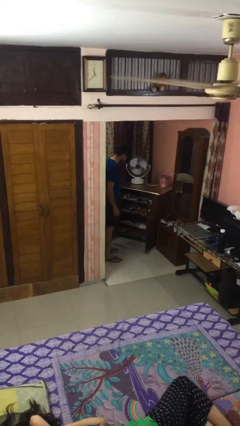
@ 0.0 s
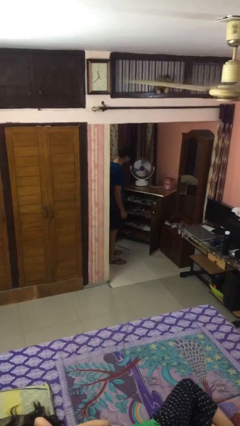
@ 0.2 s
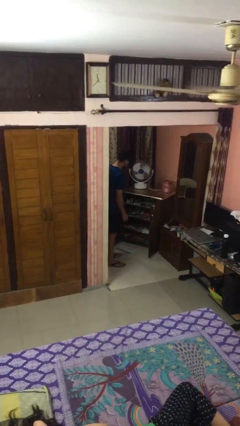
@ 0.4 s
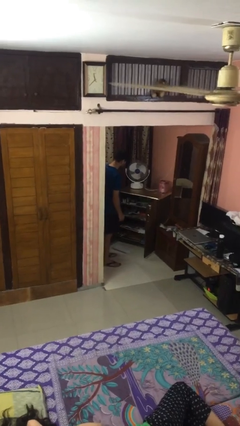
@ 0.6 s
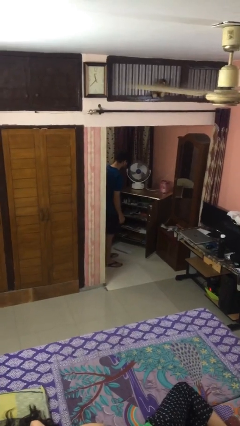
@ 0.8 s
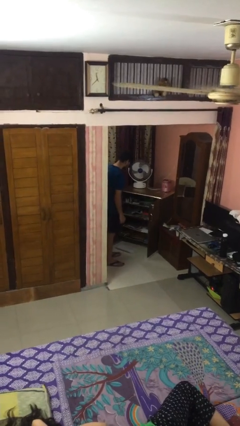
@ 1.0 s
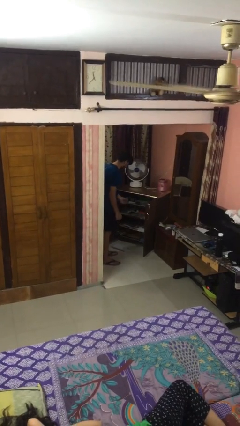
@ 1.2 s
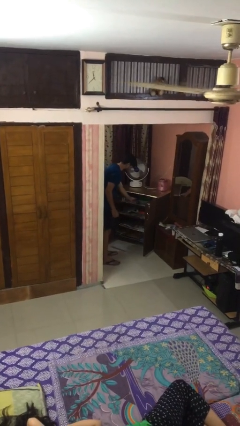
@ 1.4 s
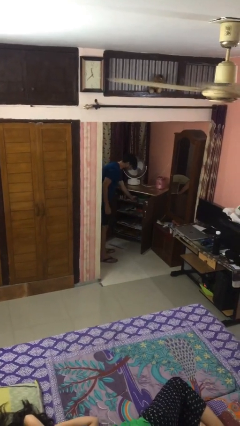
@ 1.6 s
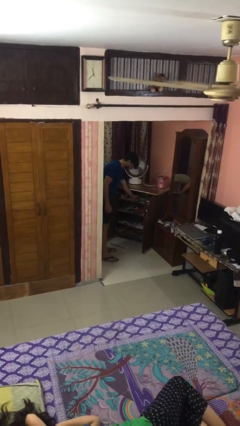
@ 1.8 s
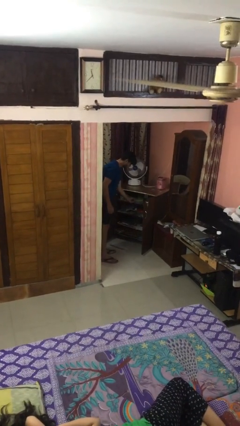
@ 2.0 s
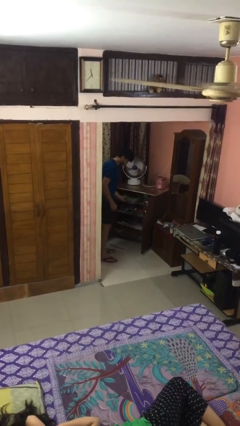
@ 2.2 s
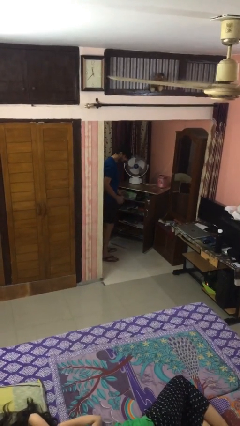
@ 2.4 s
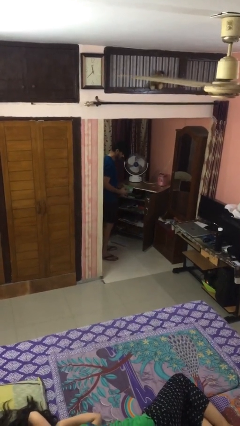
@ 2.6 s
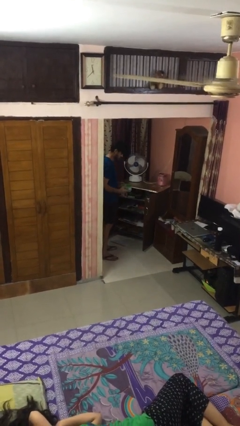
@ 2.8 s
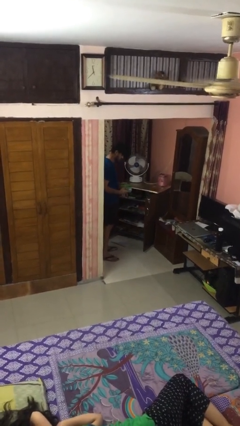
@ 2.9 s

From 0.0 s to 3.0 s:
person picks up object from cabinet

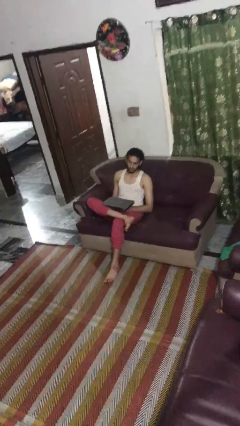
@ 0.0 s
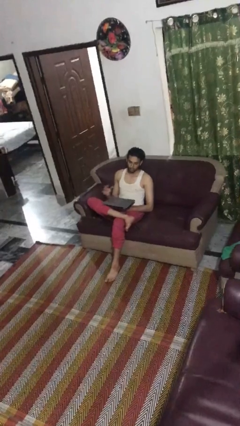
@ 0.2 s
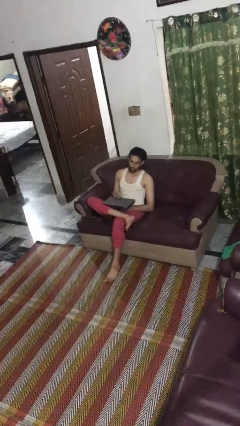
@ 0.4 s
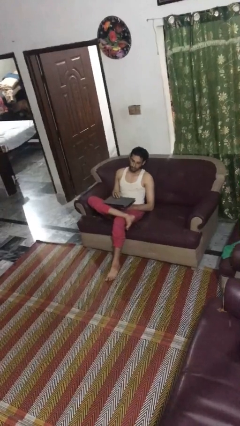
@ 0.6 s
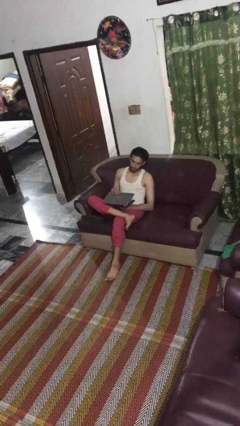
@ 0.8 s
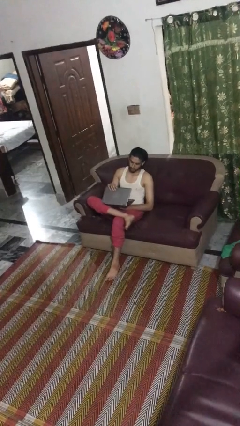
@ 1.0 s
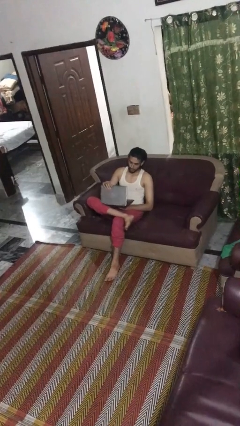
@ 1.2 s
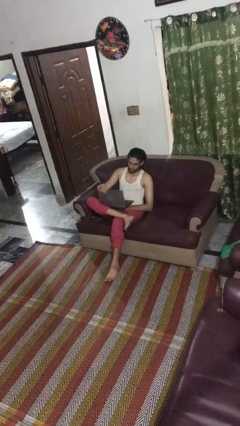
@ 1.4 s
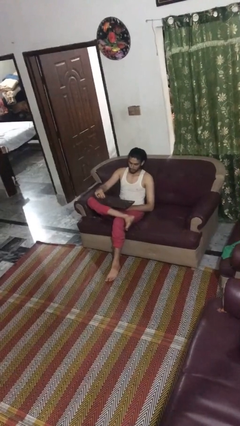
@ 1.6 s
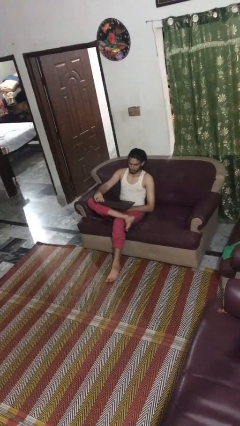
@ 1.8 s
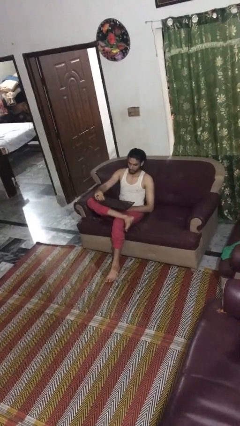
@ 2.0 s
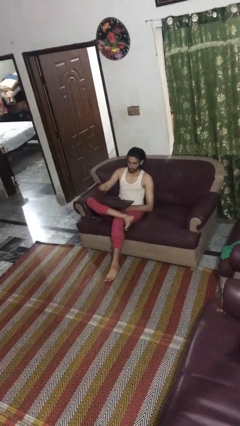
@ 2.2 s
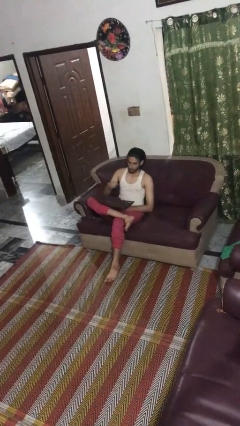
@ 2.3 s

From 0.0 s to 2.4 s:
person opens laptop

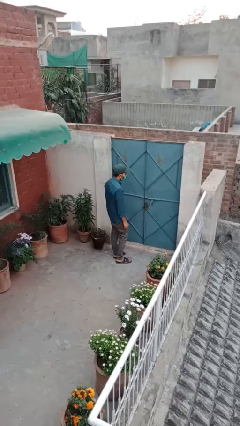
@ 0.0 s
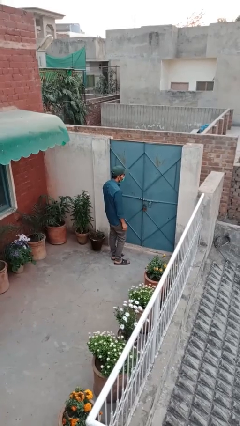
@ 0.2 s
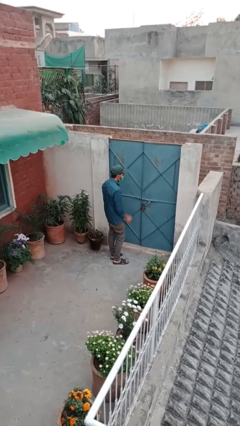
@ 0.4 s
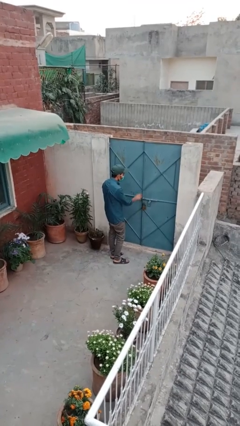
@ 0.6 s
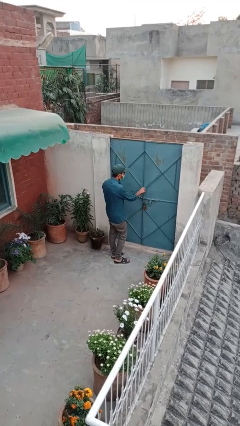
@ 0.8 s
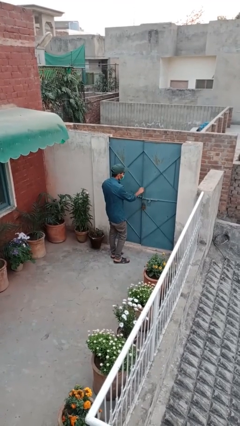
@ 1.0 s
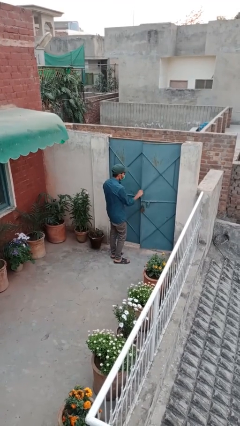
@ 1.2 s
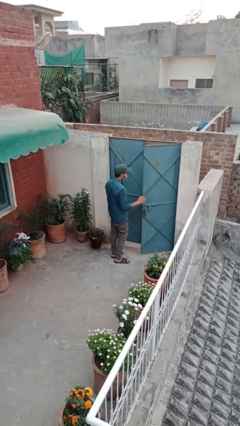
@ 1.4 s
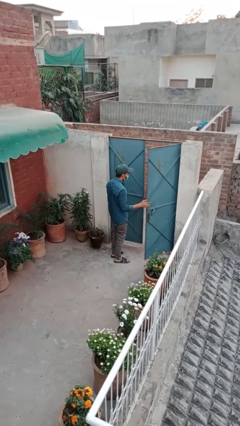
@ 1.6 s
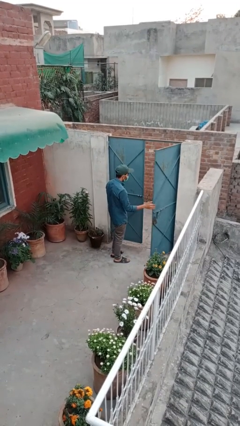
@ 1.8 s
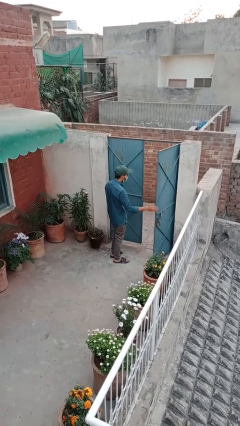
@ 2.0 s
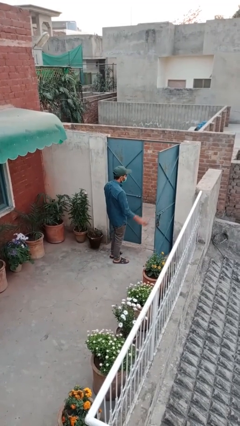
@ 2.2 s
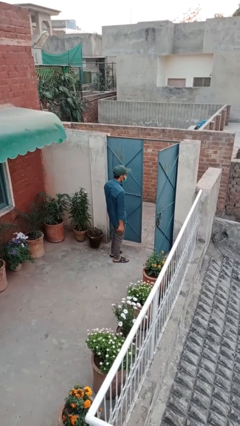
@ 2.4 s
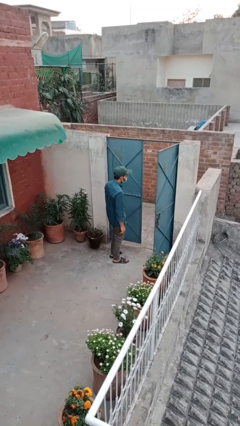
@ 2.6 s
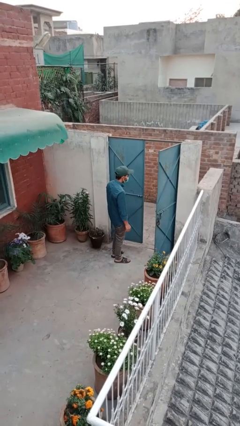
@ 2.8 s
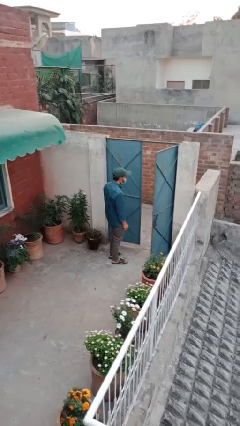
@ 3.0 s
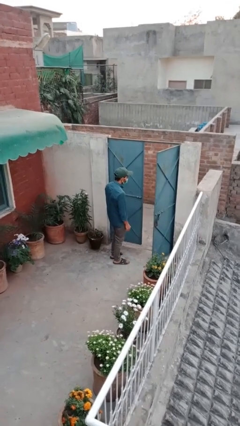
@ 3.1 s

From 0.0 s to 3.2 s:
person opens facility door

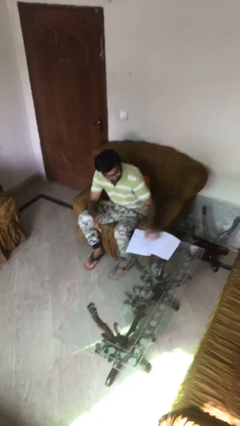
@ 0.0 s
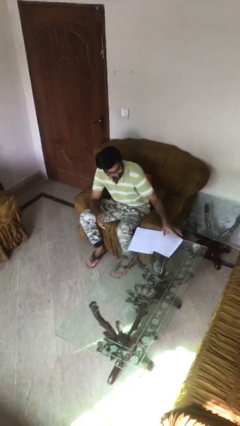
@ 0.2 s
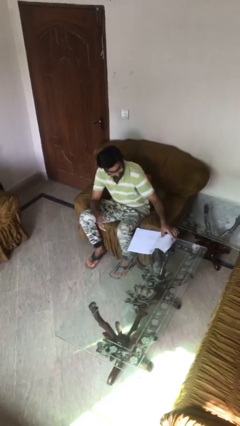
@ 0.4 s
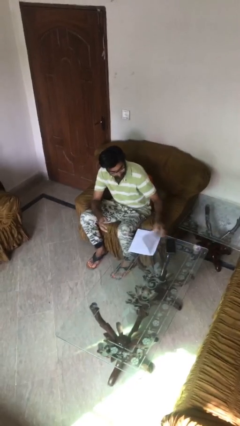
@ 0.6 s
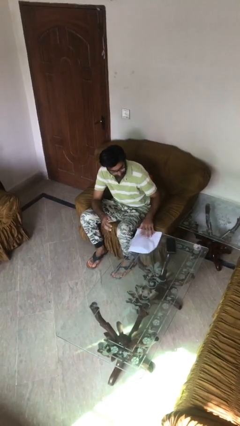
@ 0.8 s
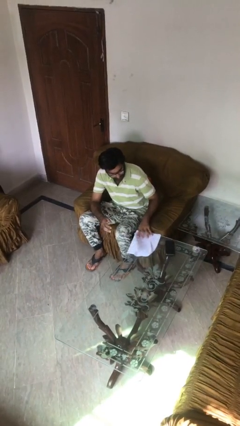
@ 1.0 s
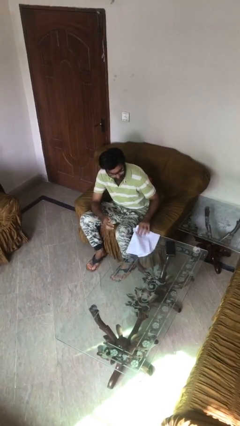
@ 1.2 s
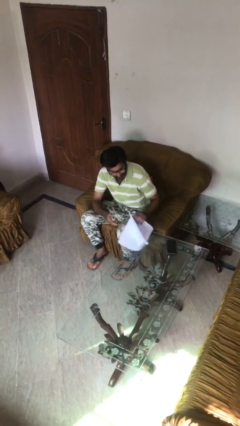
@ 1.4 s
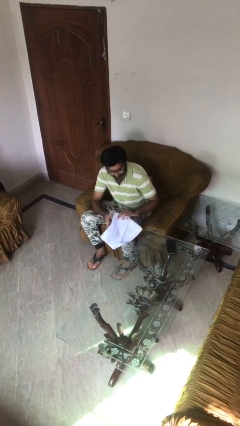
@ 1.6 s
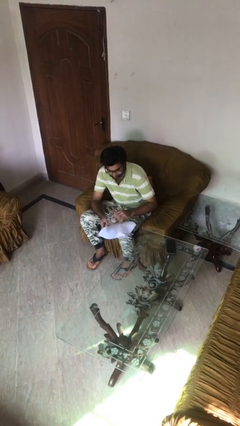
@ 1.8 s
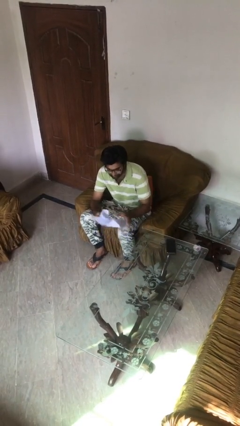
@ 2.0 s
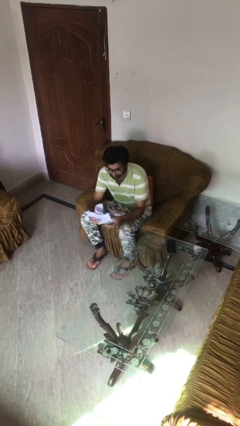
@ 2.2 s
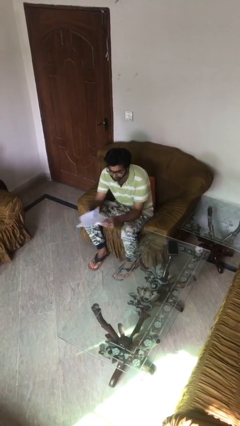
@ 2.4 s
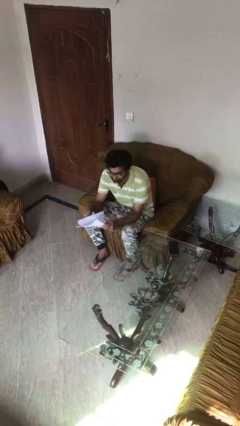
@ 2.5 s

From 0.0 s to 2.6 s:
person picks up object from table

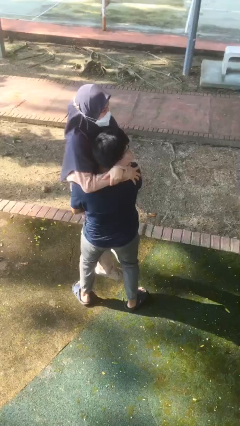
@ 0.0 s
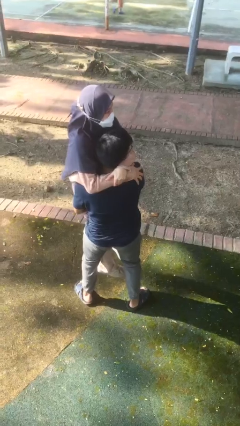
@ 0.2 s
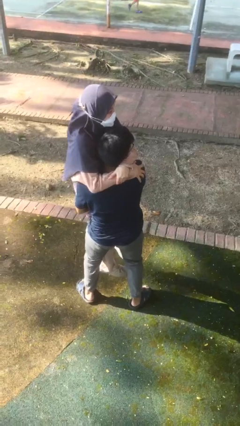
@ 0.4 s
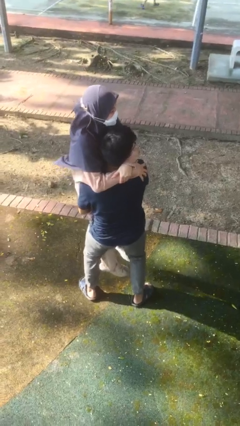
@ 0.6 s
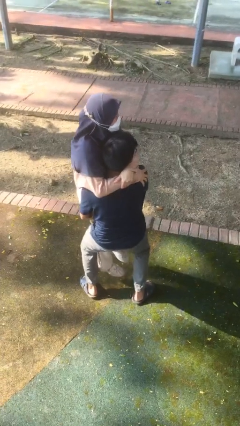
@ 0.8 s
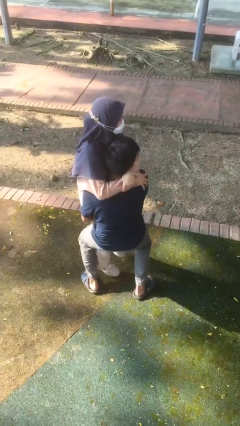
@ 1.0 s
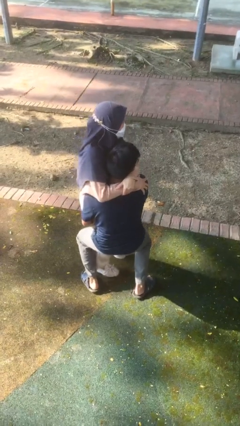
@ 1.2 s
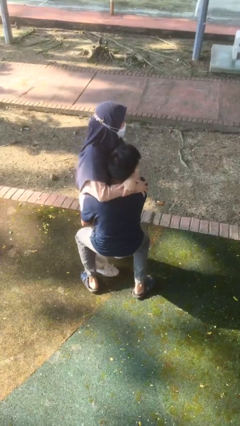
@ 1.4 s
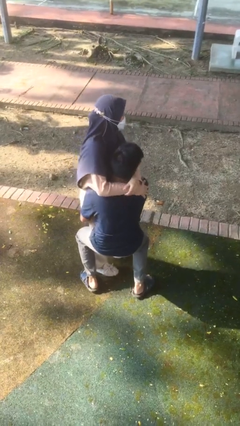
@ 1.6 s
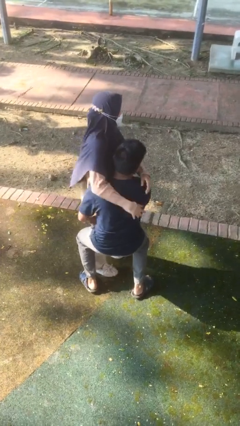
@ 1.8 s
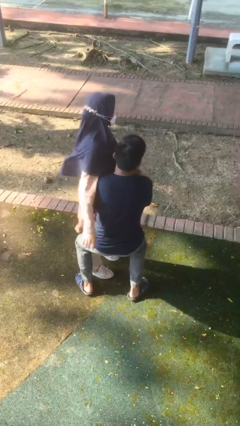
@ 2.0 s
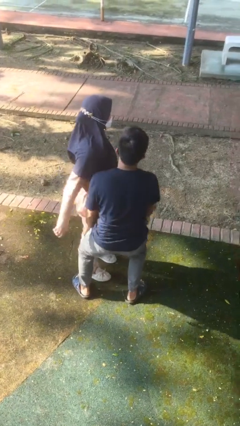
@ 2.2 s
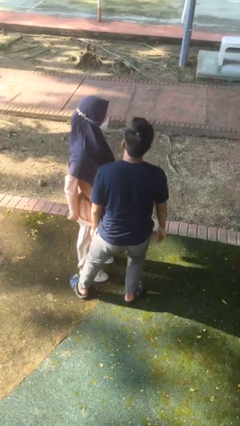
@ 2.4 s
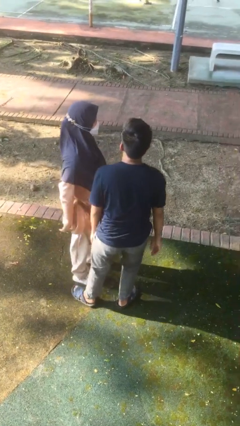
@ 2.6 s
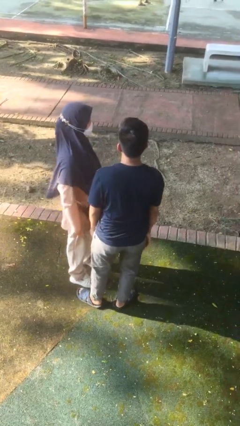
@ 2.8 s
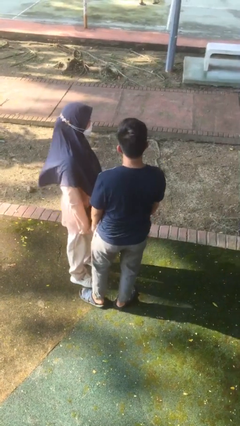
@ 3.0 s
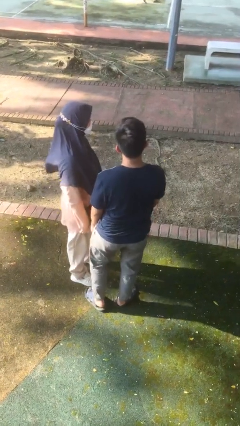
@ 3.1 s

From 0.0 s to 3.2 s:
person puts down person

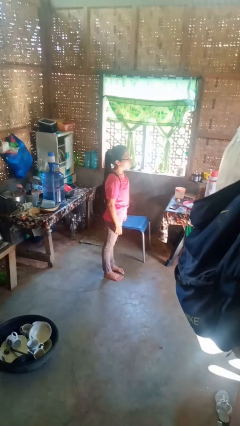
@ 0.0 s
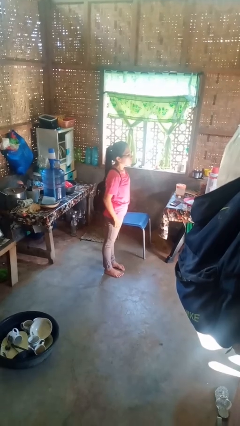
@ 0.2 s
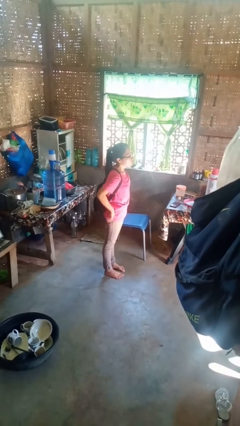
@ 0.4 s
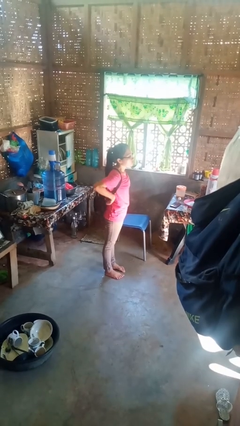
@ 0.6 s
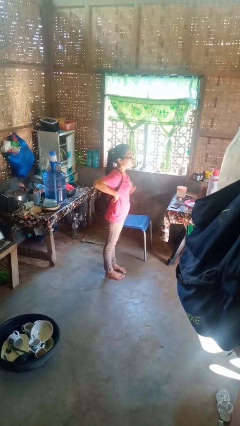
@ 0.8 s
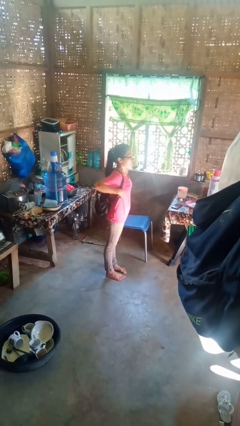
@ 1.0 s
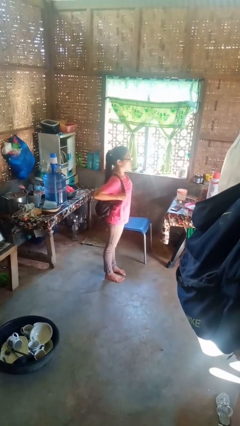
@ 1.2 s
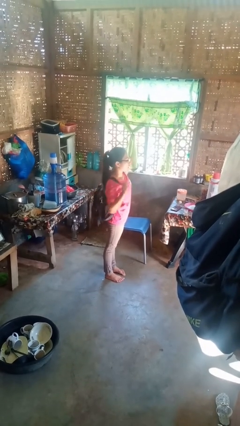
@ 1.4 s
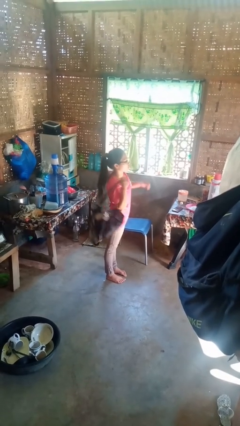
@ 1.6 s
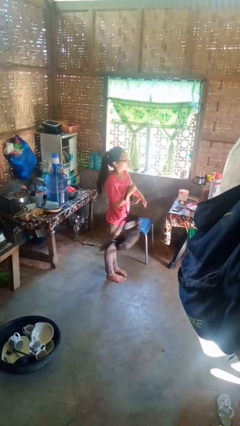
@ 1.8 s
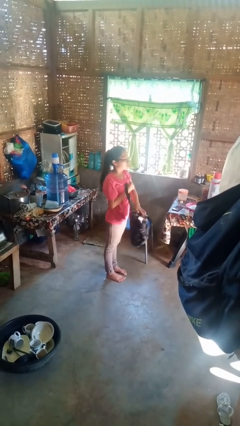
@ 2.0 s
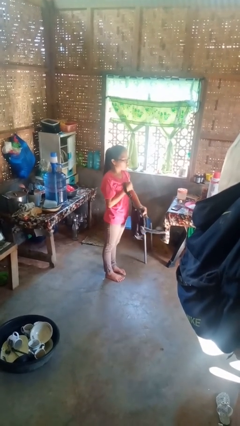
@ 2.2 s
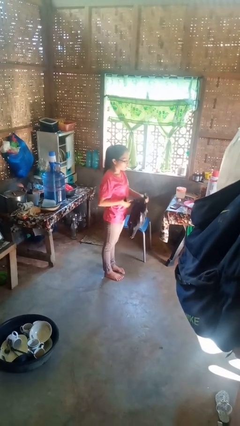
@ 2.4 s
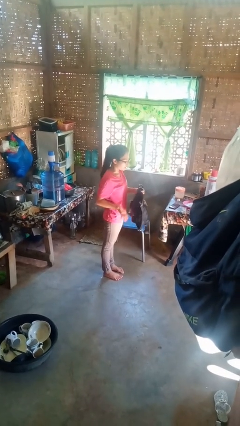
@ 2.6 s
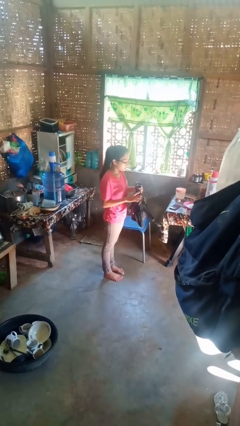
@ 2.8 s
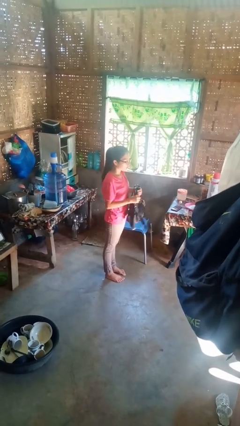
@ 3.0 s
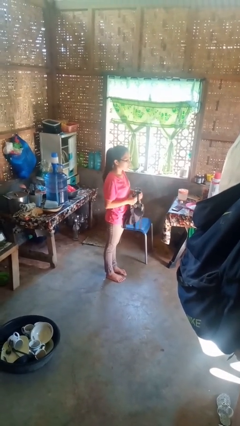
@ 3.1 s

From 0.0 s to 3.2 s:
person takes off backpack
